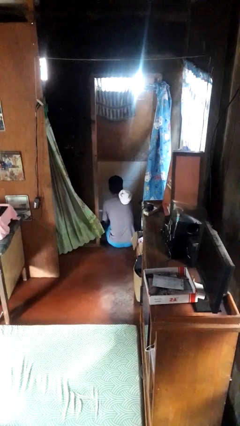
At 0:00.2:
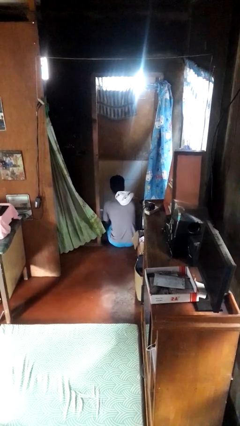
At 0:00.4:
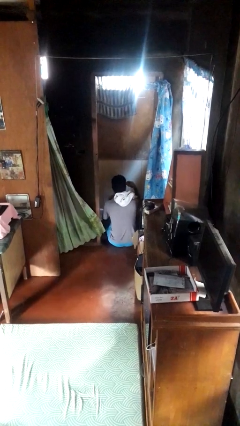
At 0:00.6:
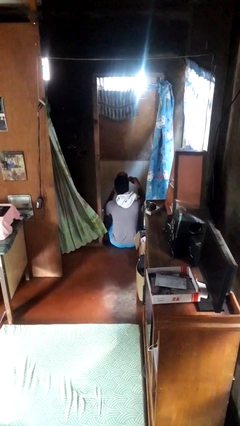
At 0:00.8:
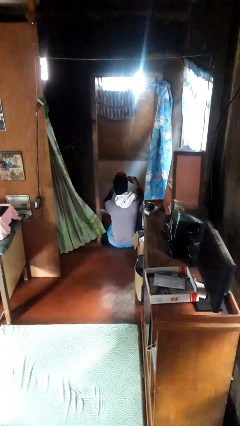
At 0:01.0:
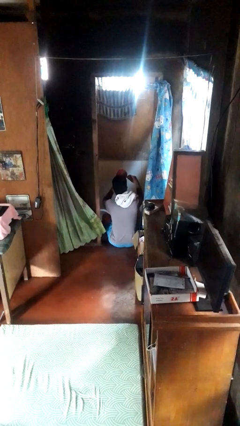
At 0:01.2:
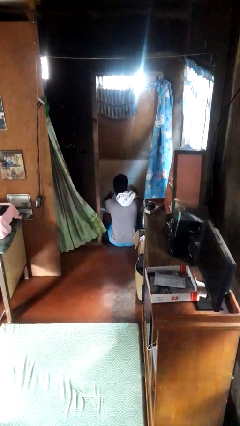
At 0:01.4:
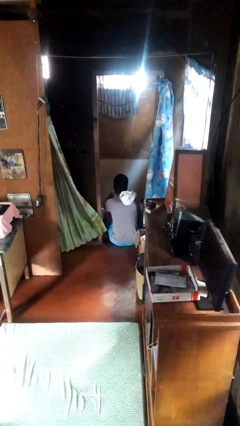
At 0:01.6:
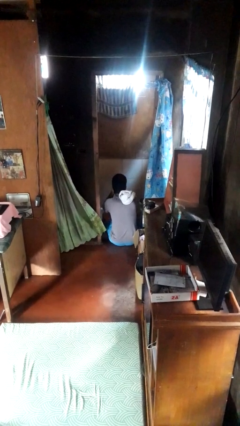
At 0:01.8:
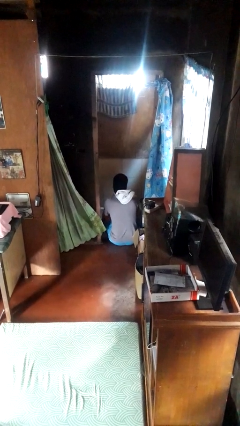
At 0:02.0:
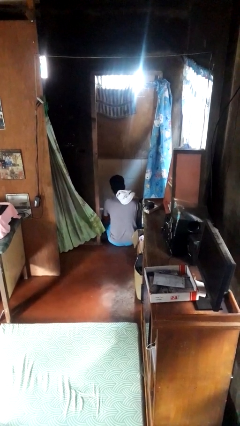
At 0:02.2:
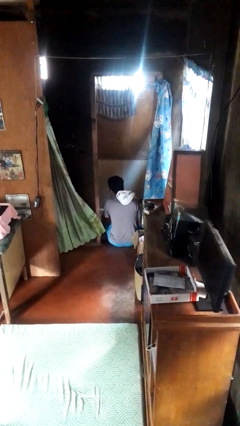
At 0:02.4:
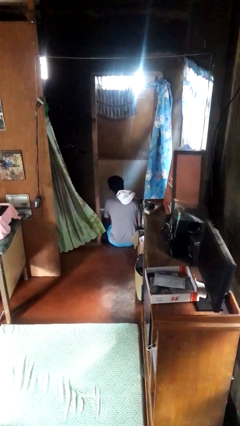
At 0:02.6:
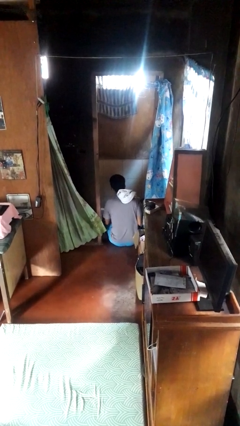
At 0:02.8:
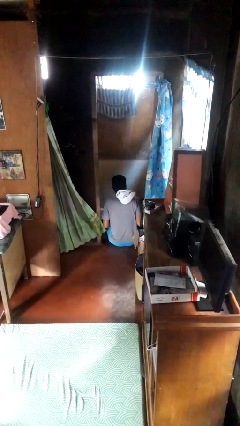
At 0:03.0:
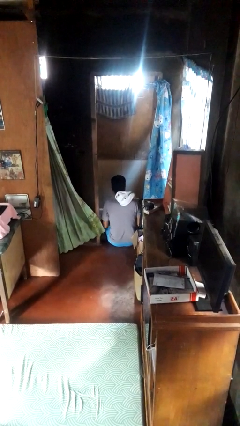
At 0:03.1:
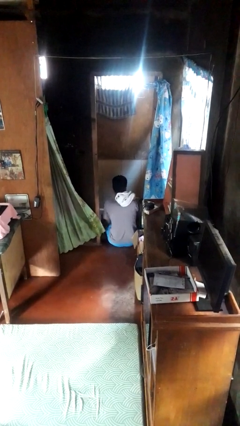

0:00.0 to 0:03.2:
person washes face

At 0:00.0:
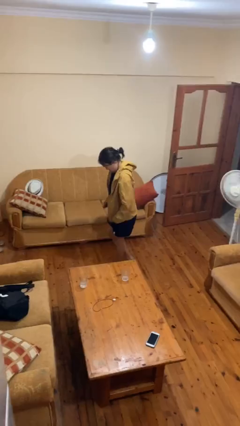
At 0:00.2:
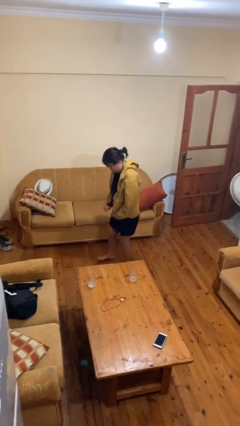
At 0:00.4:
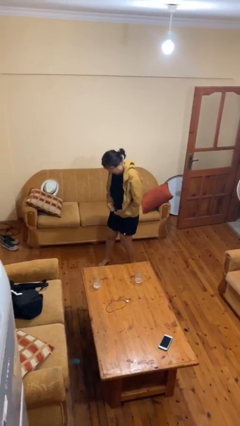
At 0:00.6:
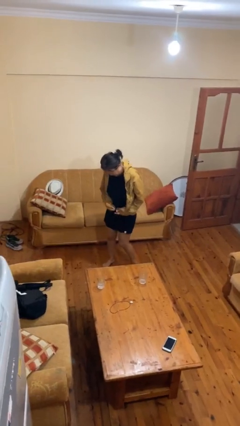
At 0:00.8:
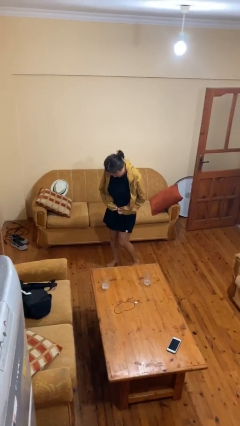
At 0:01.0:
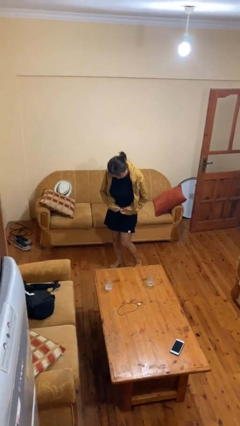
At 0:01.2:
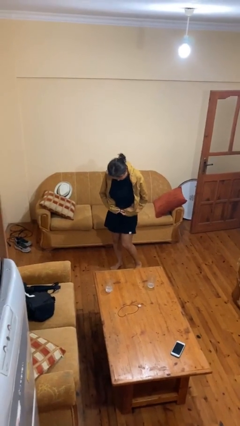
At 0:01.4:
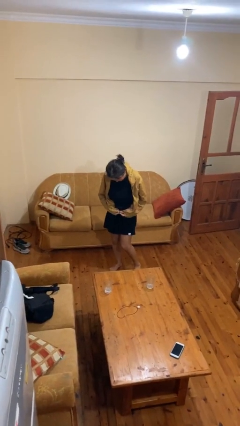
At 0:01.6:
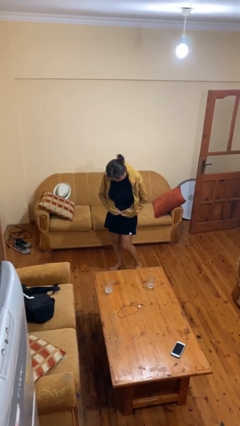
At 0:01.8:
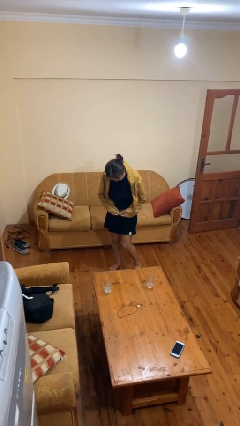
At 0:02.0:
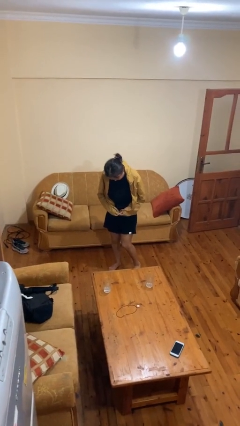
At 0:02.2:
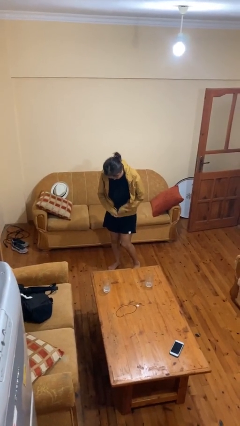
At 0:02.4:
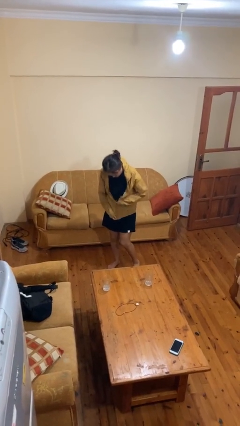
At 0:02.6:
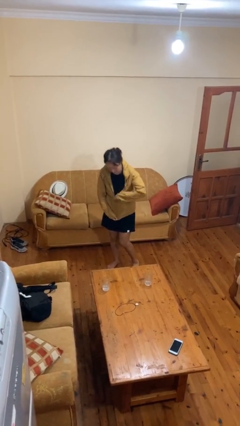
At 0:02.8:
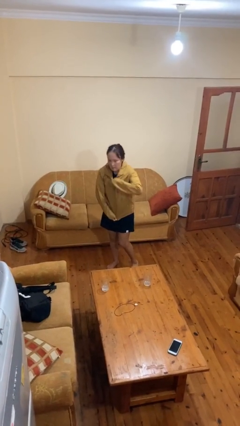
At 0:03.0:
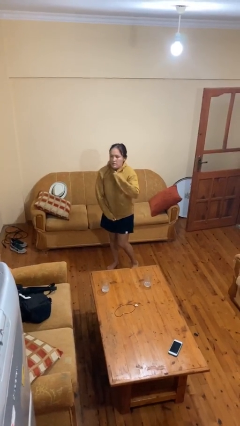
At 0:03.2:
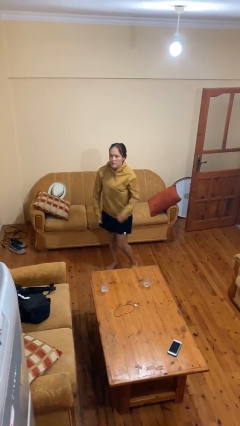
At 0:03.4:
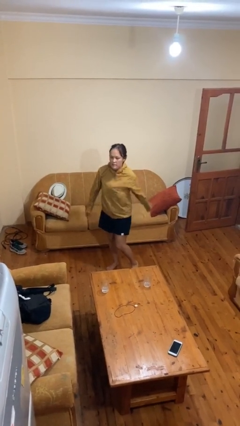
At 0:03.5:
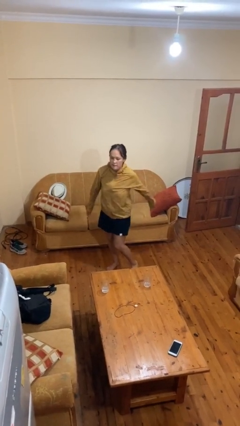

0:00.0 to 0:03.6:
person zips up jacket

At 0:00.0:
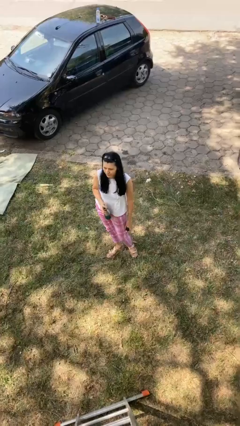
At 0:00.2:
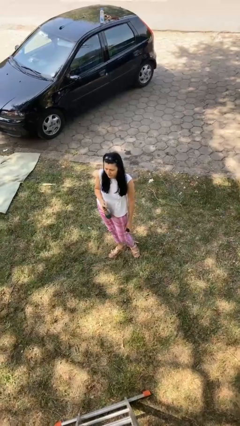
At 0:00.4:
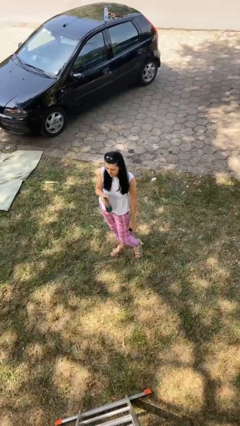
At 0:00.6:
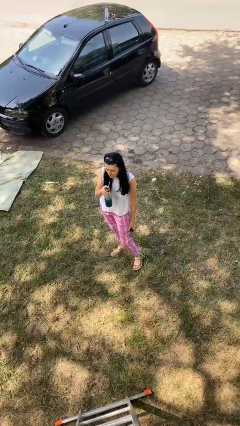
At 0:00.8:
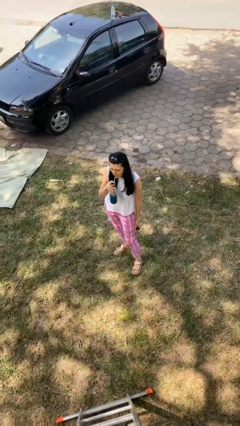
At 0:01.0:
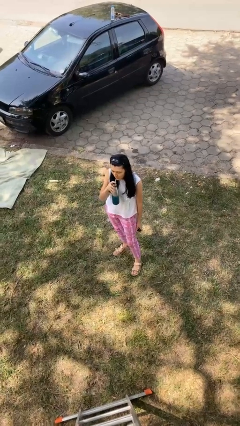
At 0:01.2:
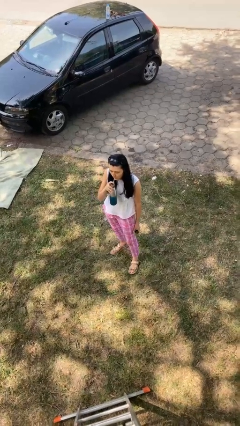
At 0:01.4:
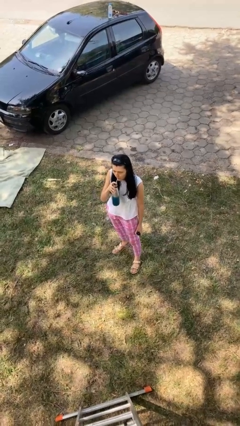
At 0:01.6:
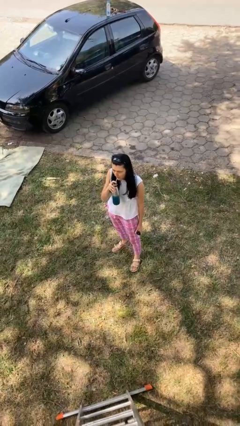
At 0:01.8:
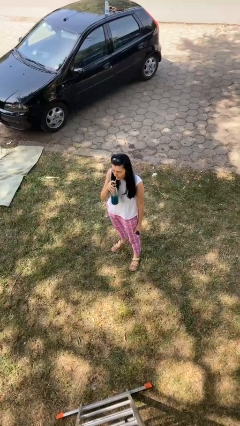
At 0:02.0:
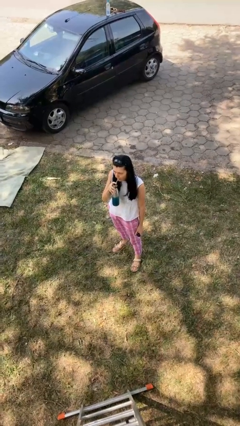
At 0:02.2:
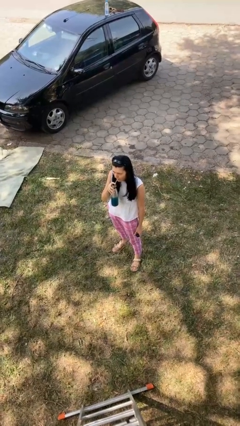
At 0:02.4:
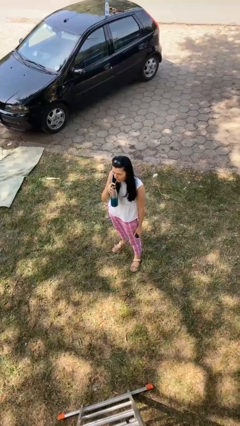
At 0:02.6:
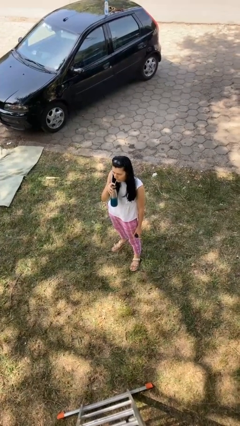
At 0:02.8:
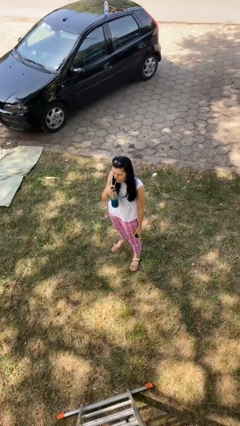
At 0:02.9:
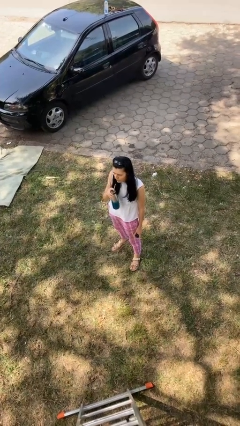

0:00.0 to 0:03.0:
person drinks from straw

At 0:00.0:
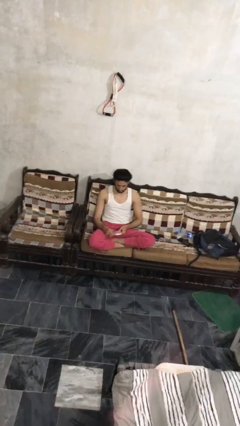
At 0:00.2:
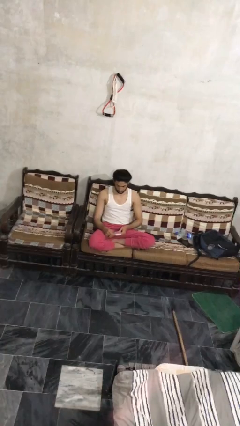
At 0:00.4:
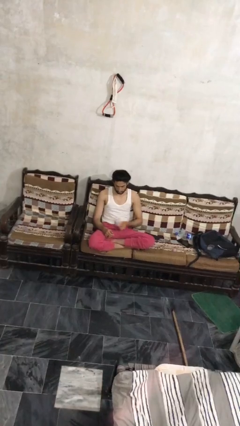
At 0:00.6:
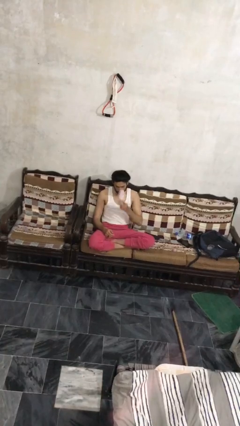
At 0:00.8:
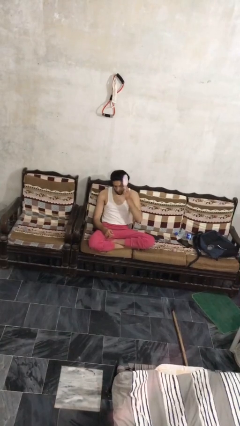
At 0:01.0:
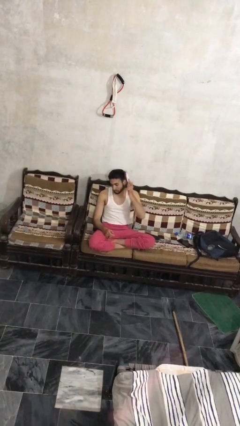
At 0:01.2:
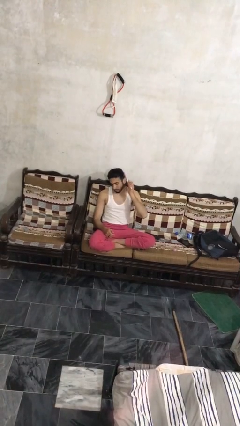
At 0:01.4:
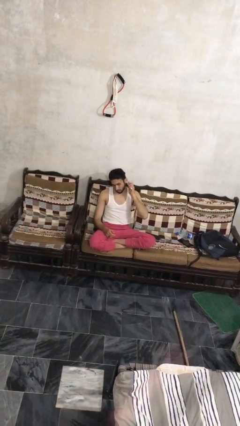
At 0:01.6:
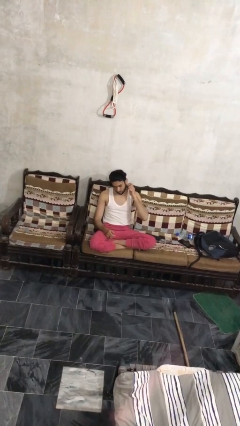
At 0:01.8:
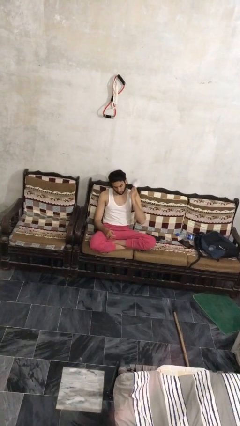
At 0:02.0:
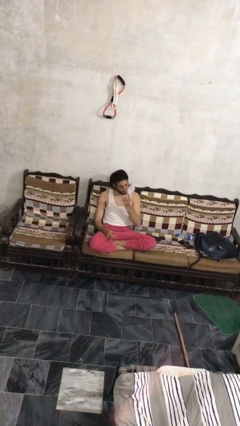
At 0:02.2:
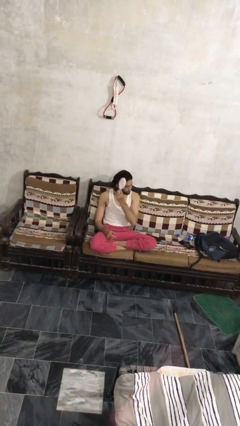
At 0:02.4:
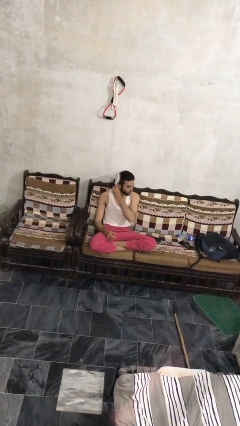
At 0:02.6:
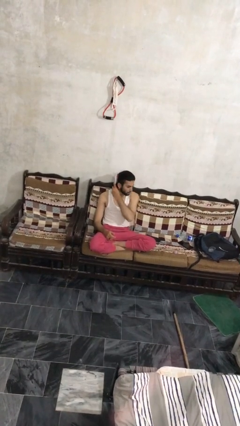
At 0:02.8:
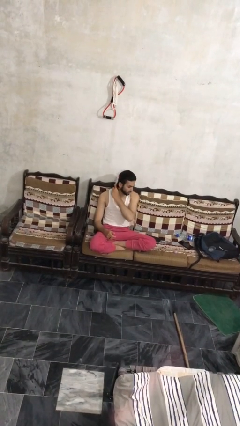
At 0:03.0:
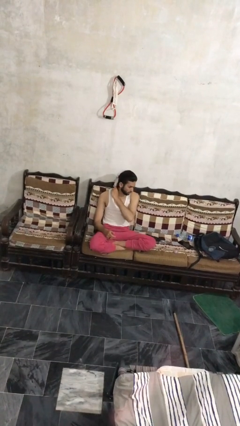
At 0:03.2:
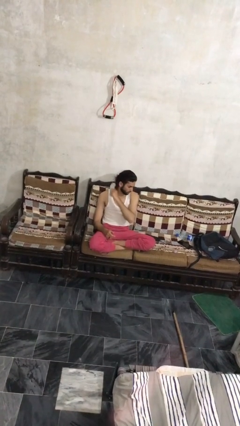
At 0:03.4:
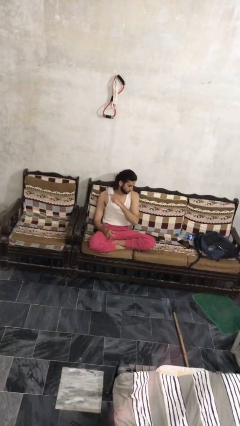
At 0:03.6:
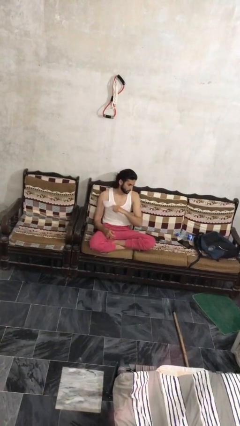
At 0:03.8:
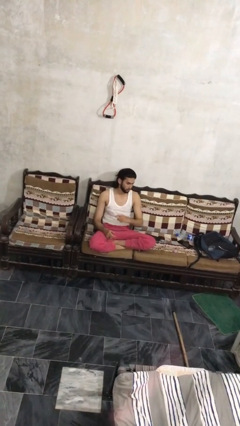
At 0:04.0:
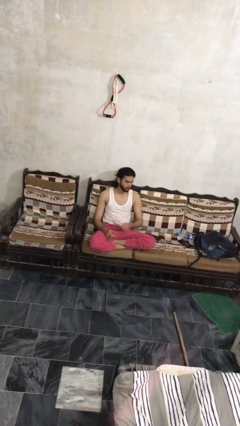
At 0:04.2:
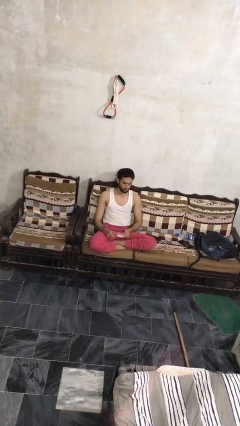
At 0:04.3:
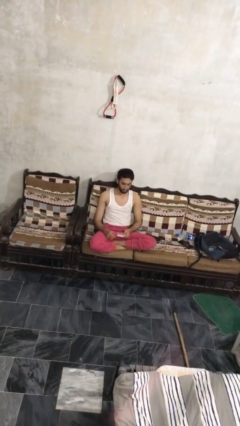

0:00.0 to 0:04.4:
person brushes hair

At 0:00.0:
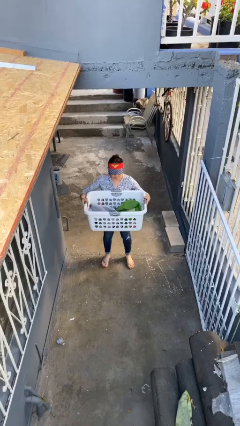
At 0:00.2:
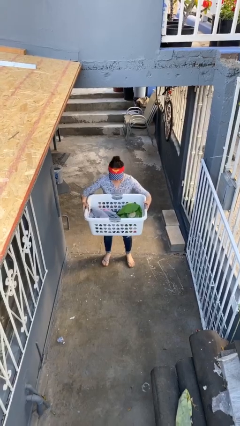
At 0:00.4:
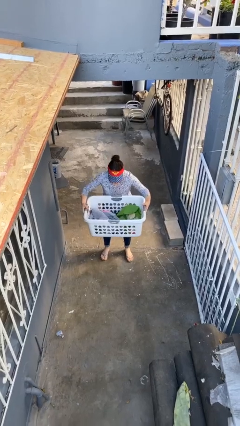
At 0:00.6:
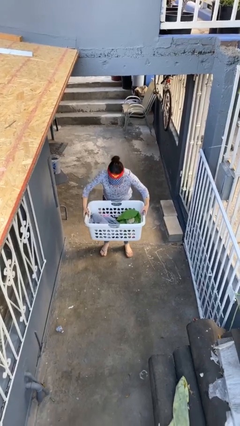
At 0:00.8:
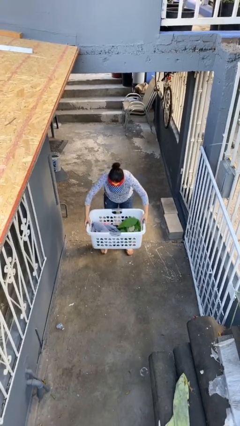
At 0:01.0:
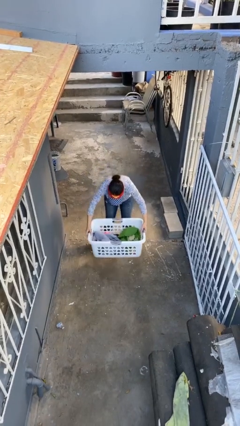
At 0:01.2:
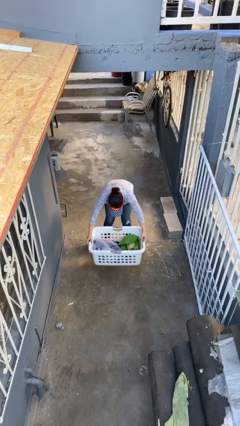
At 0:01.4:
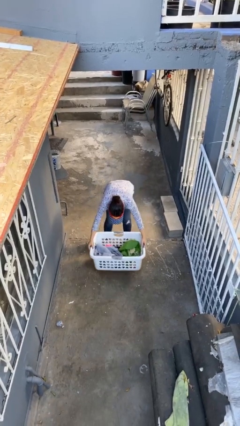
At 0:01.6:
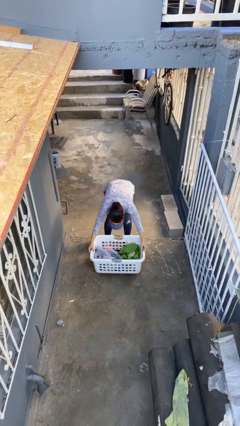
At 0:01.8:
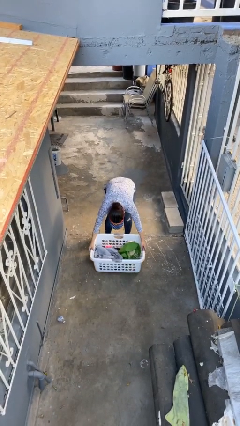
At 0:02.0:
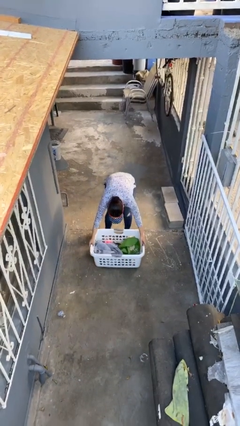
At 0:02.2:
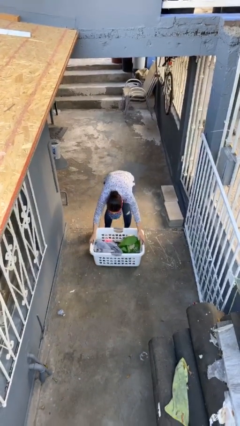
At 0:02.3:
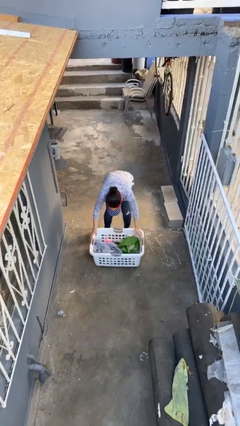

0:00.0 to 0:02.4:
person puts down object on floor

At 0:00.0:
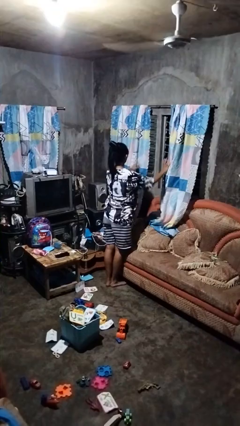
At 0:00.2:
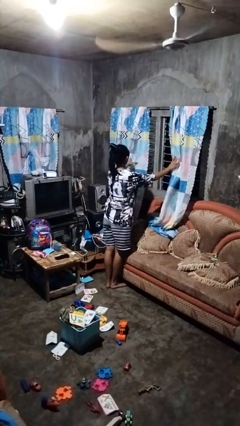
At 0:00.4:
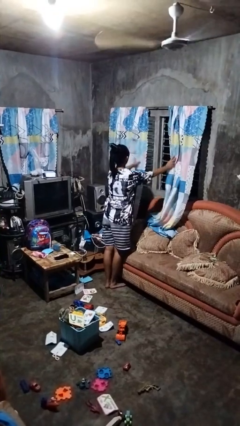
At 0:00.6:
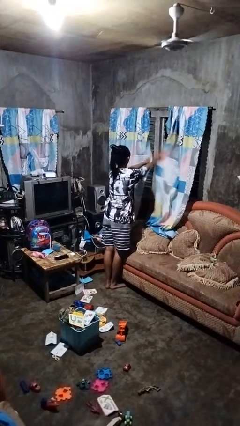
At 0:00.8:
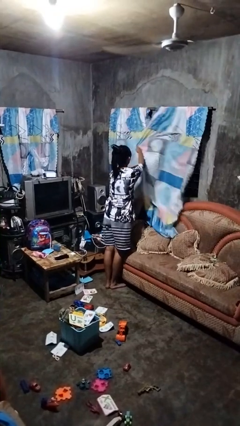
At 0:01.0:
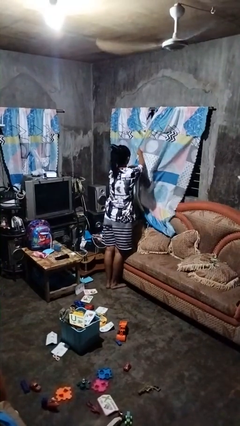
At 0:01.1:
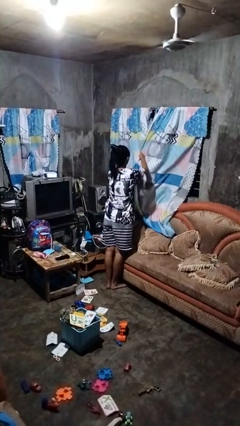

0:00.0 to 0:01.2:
person closes curtains
